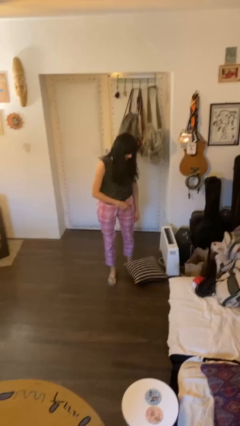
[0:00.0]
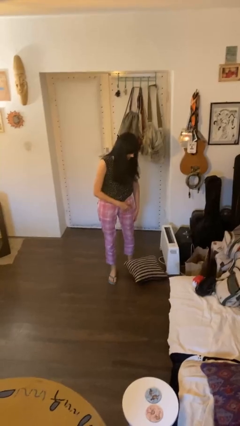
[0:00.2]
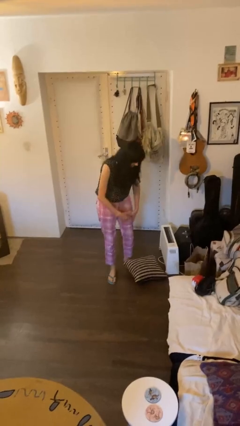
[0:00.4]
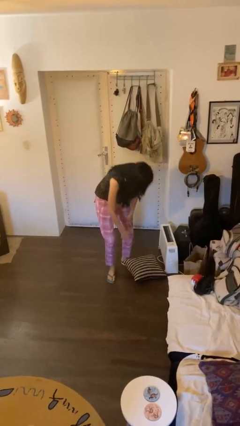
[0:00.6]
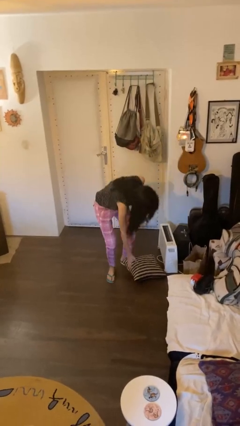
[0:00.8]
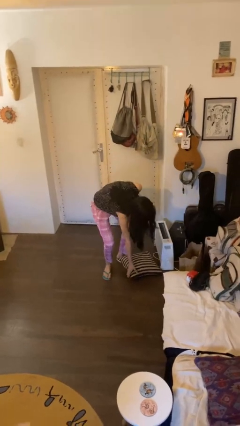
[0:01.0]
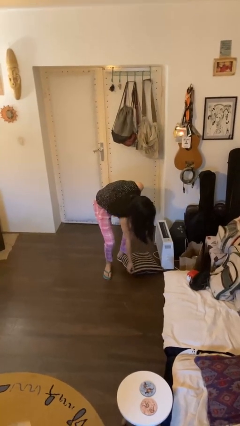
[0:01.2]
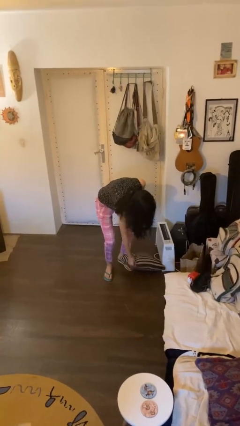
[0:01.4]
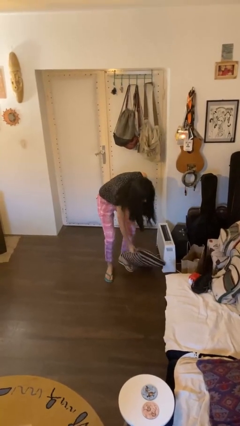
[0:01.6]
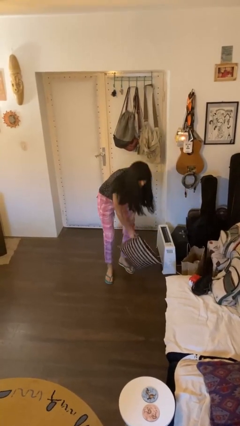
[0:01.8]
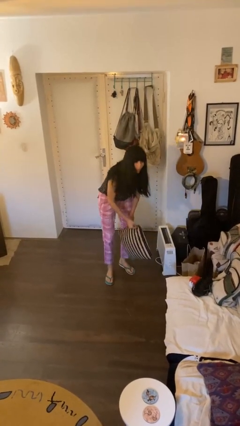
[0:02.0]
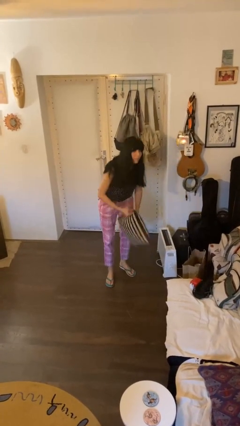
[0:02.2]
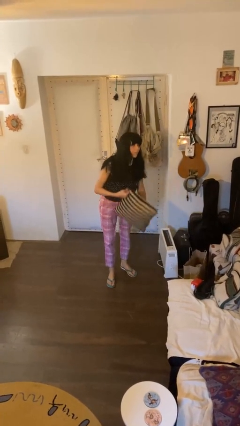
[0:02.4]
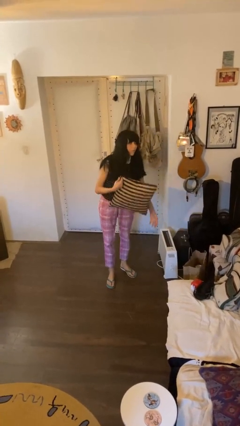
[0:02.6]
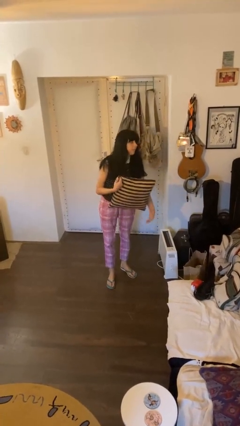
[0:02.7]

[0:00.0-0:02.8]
person picks up object from floor

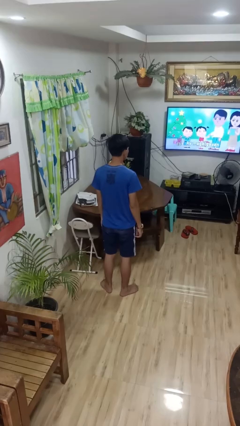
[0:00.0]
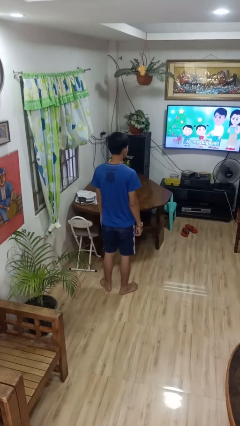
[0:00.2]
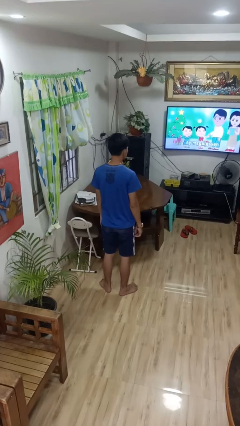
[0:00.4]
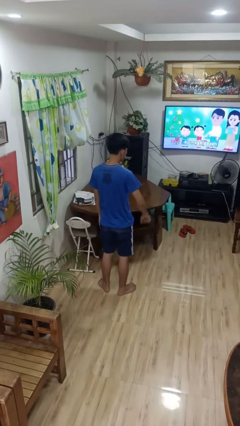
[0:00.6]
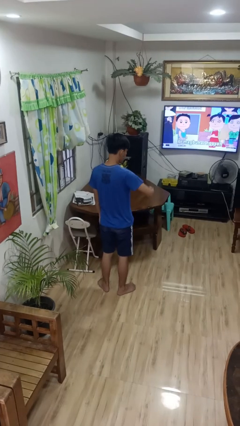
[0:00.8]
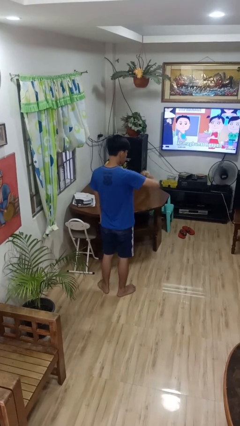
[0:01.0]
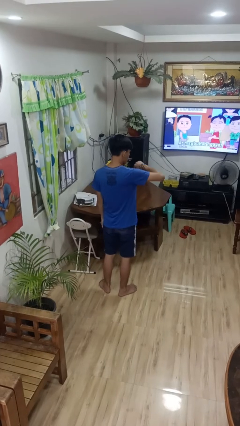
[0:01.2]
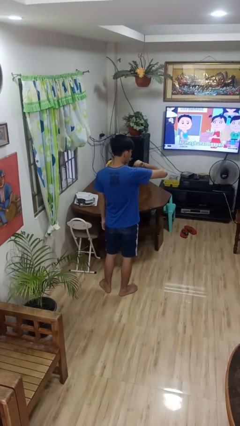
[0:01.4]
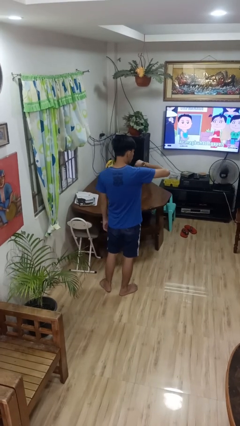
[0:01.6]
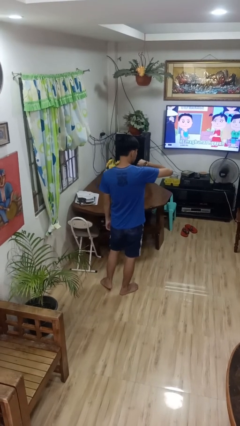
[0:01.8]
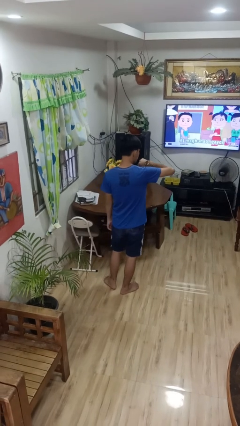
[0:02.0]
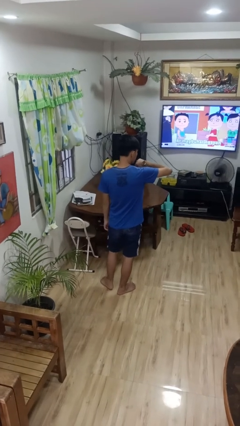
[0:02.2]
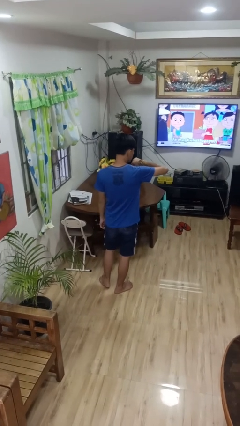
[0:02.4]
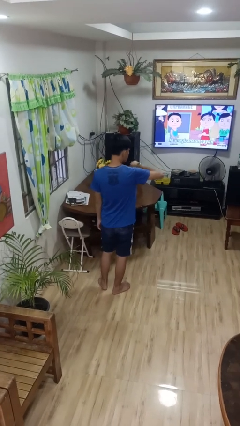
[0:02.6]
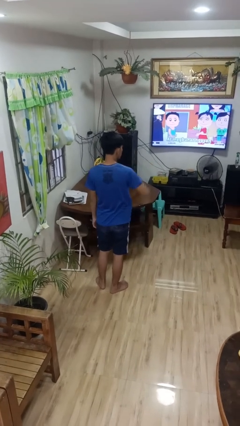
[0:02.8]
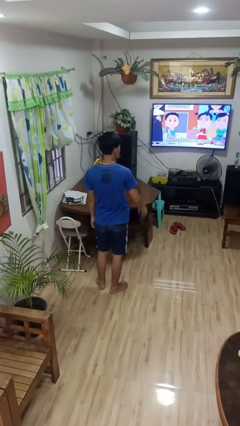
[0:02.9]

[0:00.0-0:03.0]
person looks at wristwatch

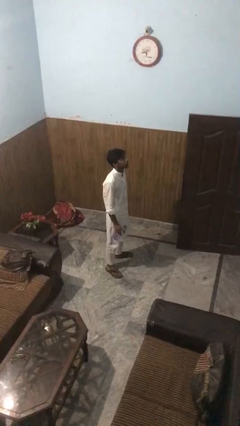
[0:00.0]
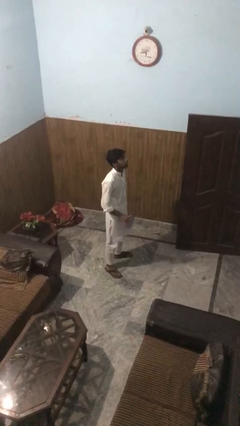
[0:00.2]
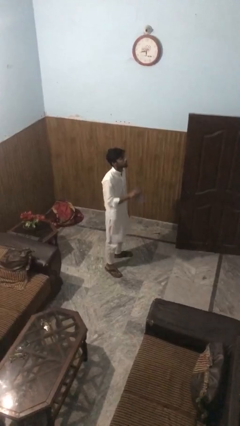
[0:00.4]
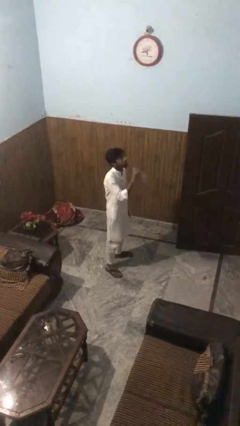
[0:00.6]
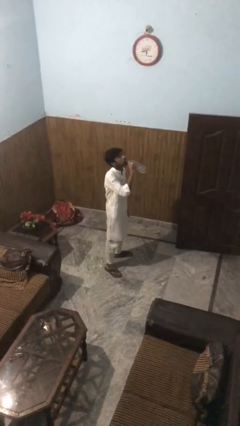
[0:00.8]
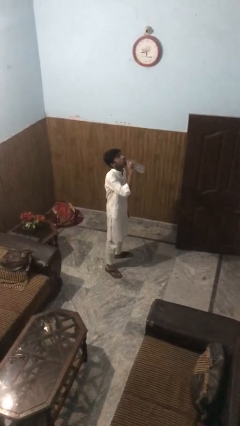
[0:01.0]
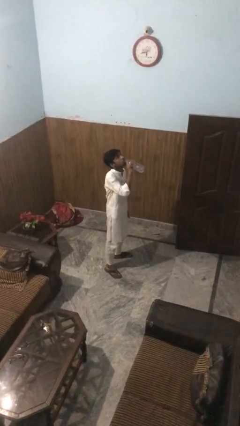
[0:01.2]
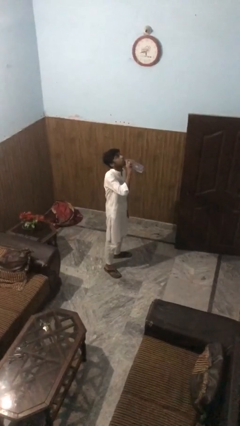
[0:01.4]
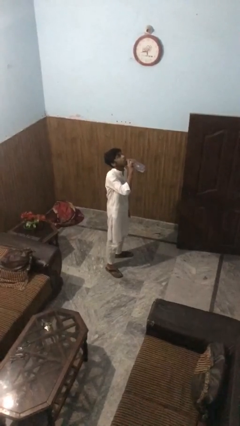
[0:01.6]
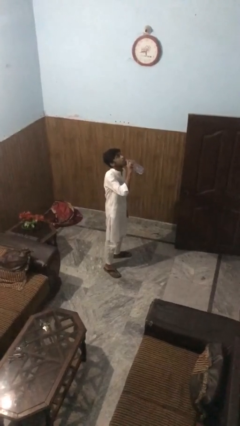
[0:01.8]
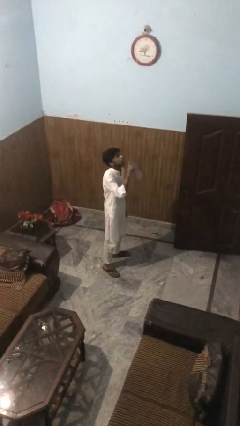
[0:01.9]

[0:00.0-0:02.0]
person drinks from bottle

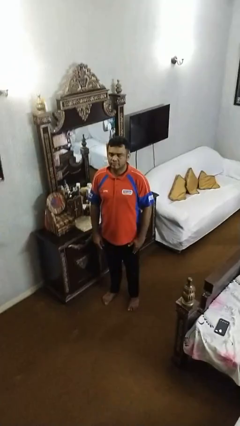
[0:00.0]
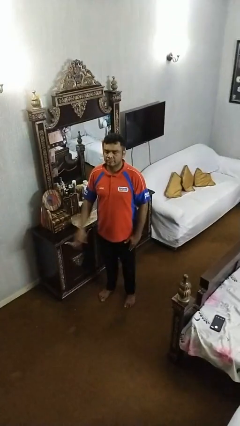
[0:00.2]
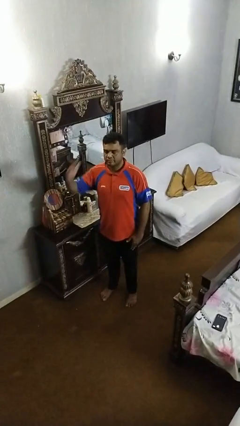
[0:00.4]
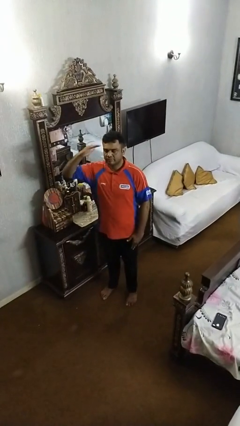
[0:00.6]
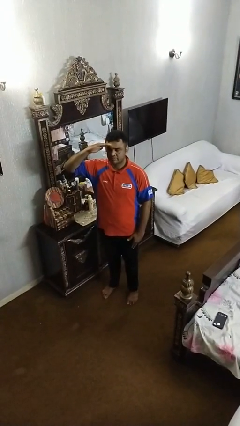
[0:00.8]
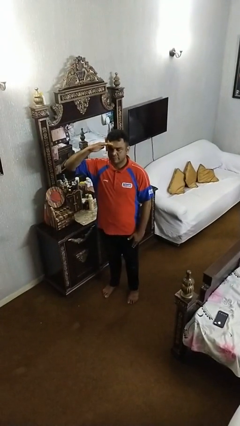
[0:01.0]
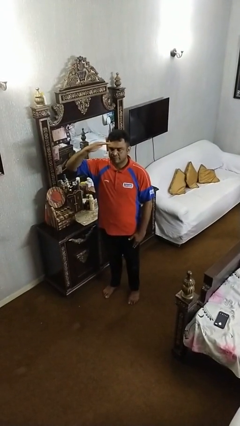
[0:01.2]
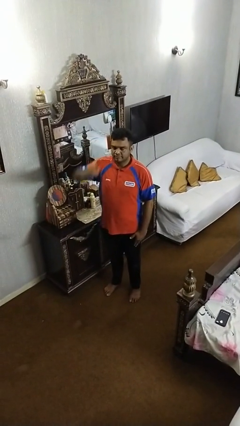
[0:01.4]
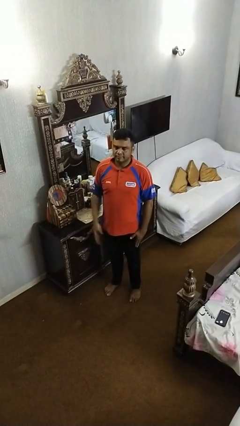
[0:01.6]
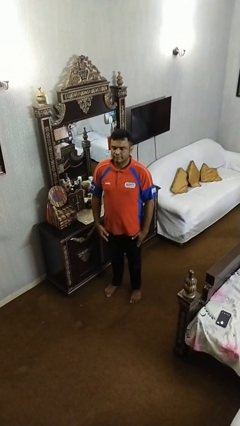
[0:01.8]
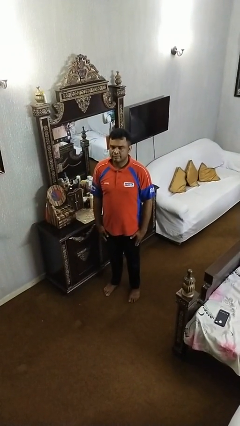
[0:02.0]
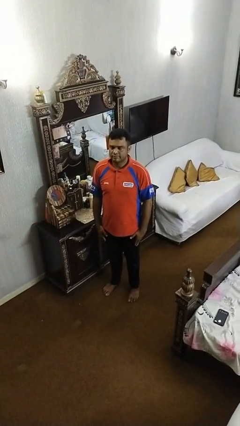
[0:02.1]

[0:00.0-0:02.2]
person salutes

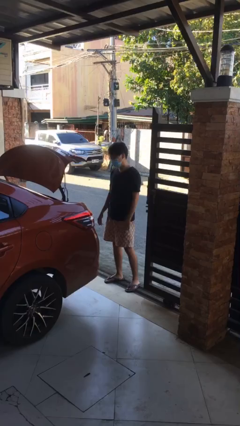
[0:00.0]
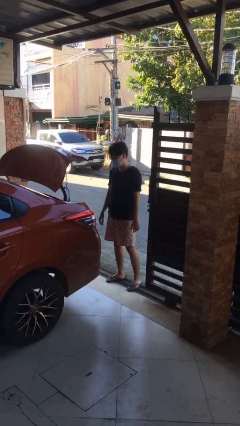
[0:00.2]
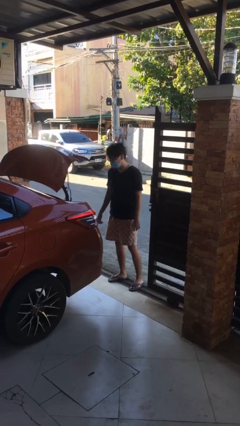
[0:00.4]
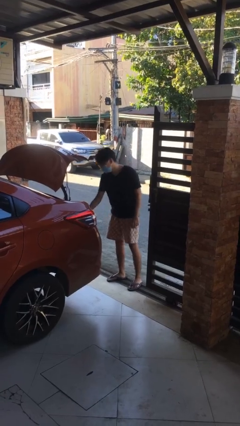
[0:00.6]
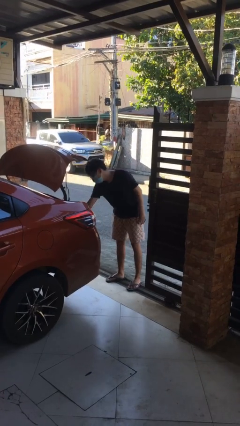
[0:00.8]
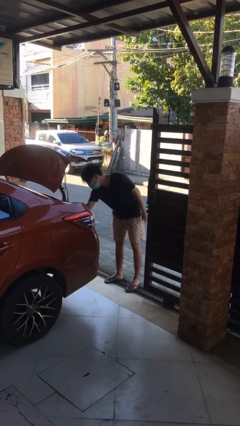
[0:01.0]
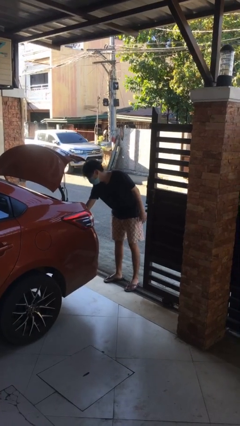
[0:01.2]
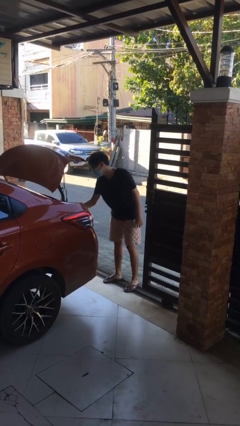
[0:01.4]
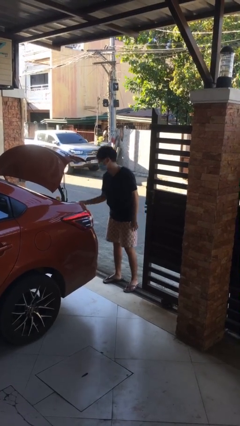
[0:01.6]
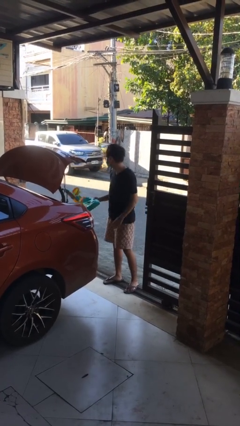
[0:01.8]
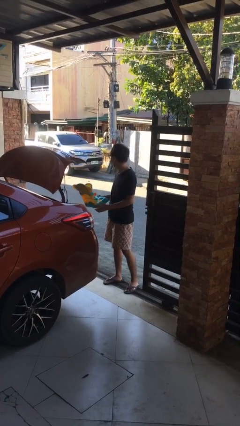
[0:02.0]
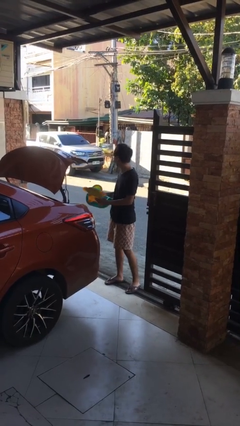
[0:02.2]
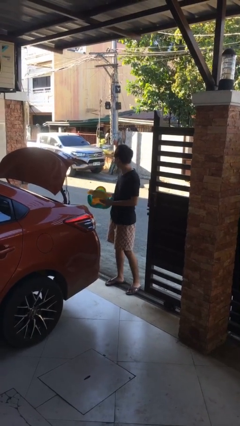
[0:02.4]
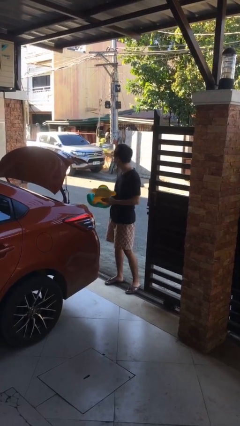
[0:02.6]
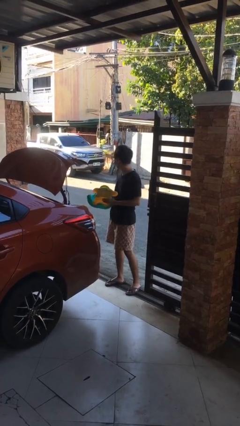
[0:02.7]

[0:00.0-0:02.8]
person unloads car

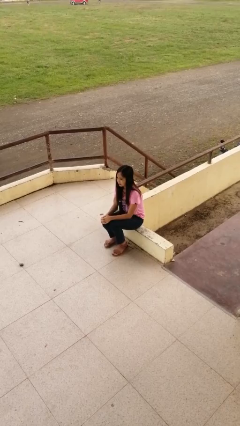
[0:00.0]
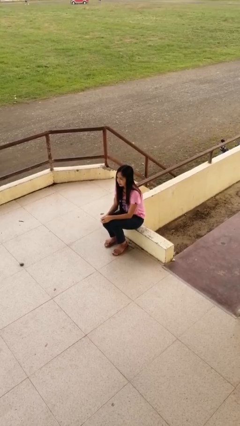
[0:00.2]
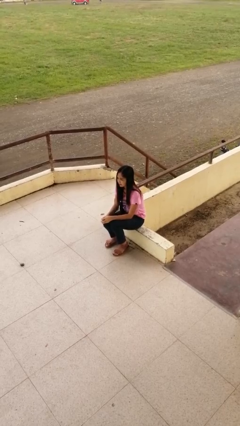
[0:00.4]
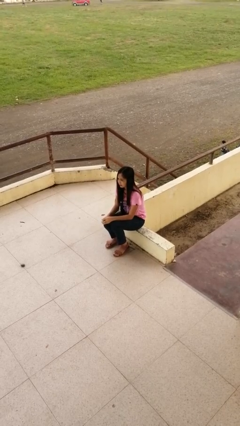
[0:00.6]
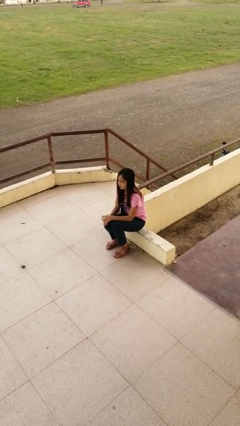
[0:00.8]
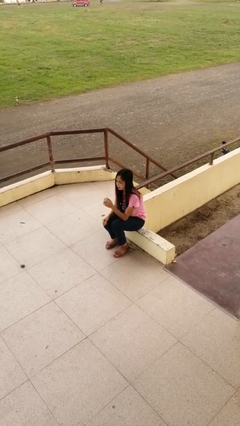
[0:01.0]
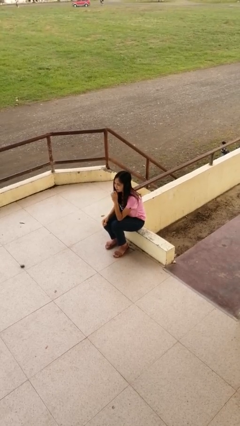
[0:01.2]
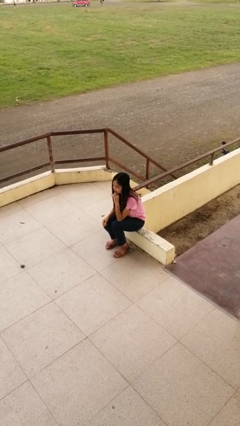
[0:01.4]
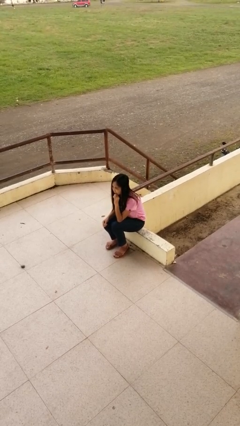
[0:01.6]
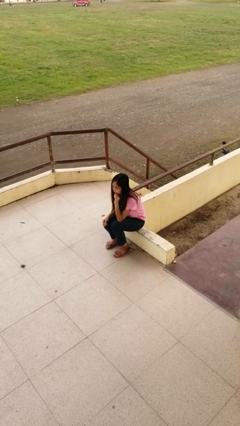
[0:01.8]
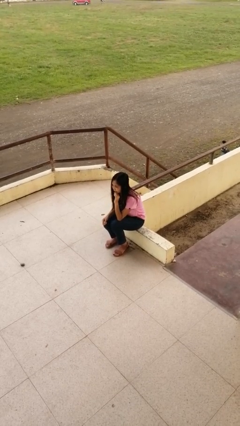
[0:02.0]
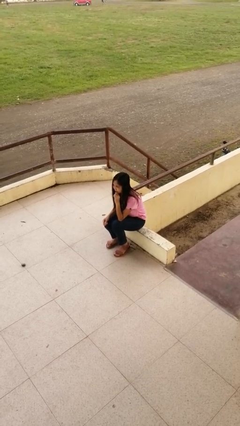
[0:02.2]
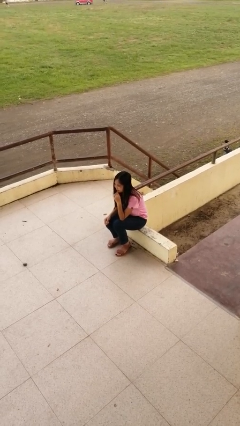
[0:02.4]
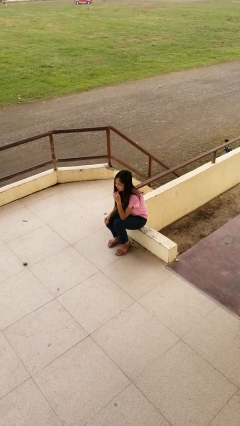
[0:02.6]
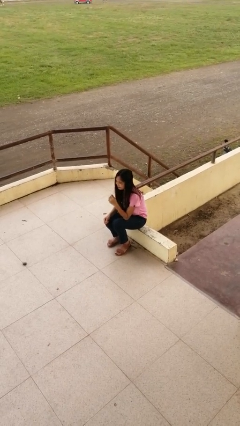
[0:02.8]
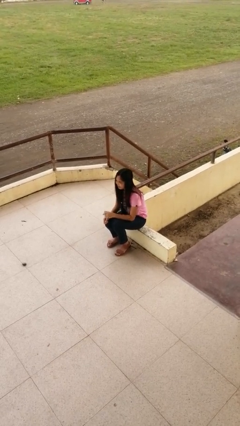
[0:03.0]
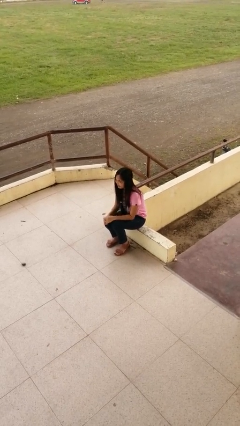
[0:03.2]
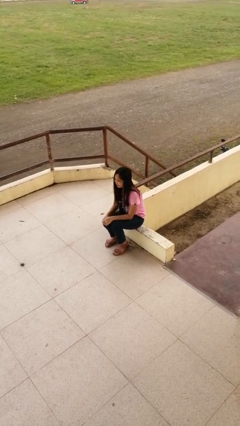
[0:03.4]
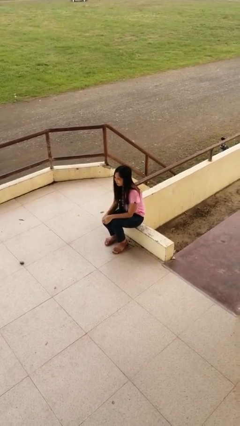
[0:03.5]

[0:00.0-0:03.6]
person strokes chin

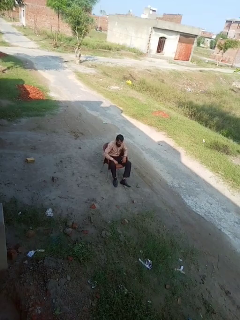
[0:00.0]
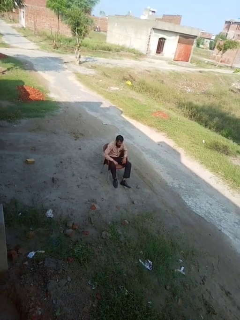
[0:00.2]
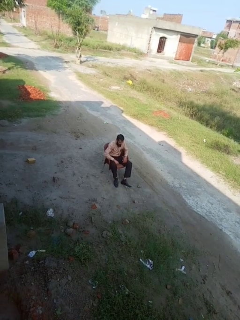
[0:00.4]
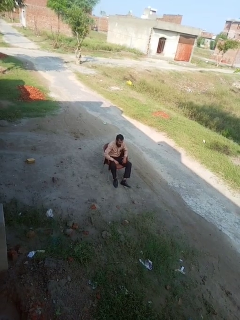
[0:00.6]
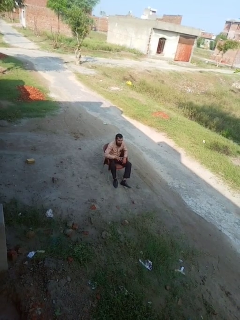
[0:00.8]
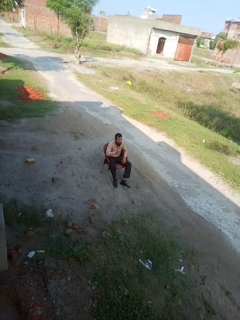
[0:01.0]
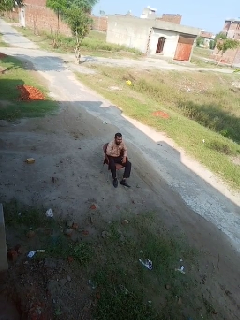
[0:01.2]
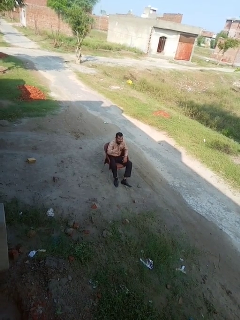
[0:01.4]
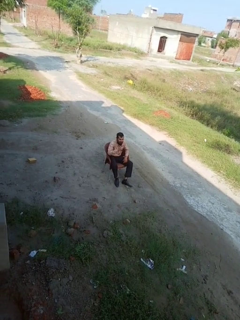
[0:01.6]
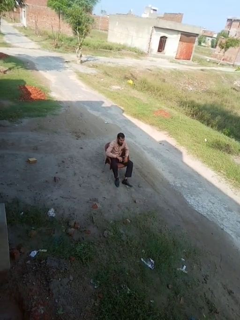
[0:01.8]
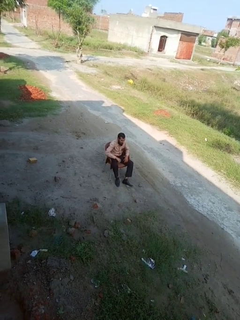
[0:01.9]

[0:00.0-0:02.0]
person gestures number four
